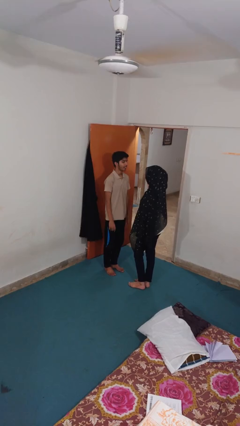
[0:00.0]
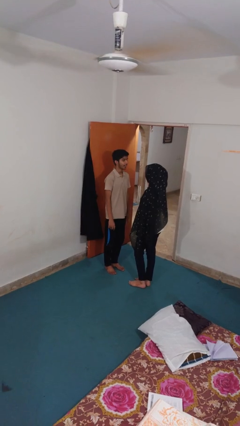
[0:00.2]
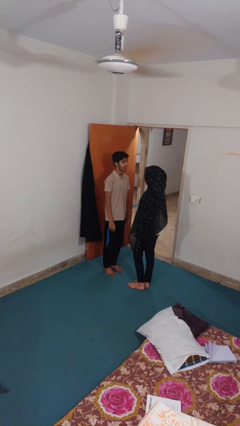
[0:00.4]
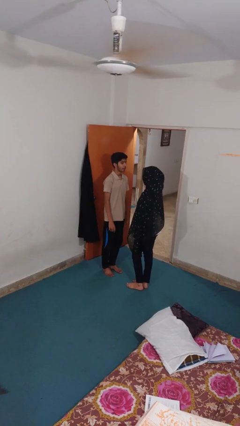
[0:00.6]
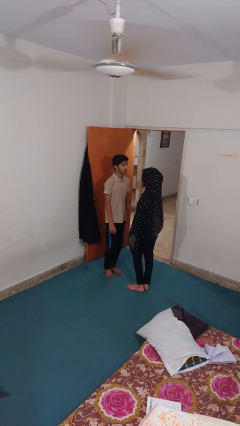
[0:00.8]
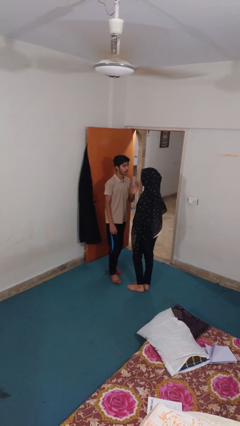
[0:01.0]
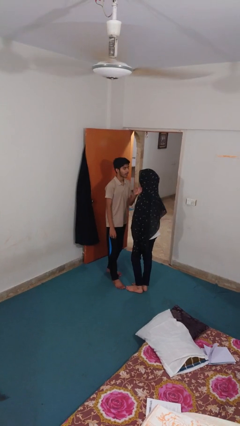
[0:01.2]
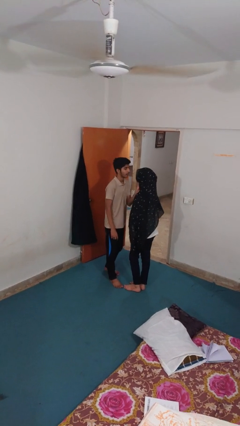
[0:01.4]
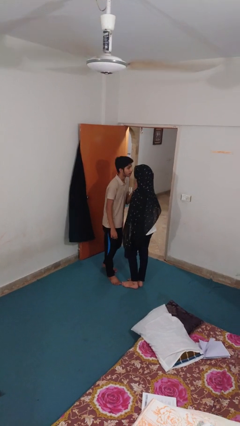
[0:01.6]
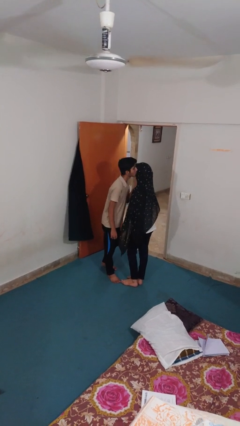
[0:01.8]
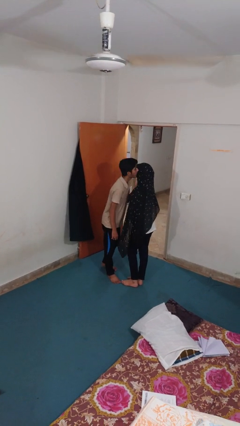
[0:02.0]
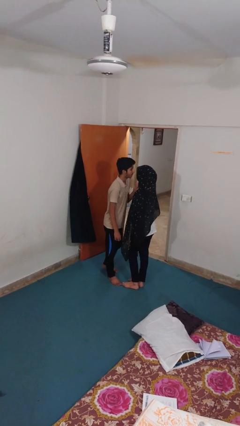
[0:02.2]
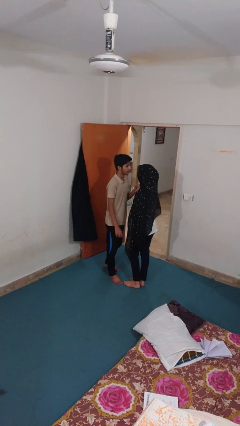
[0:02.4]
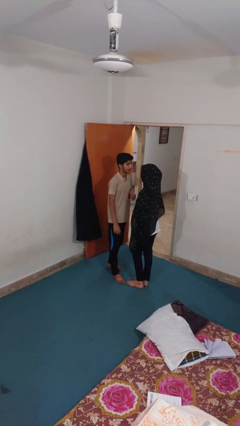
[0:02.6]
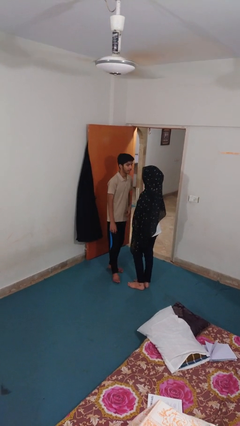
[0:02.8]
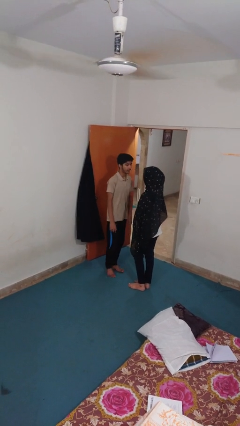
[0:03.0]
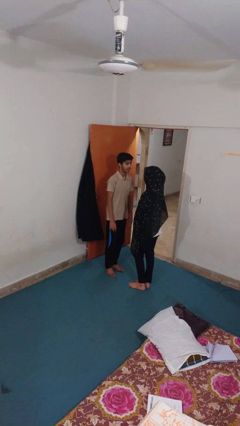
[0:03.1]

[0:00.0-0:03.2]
person kisses cheek of person

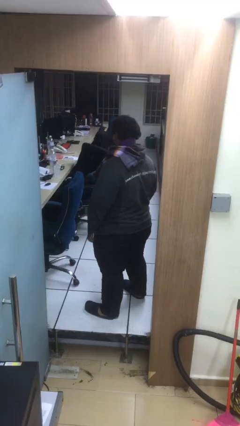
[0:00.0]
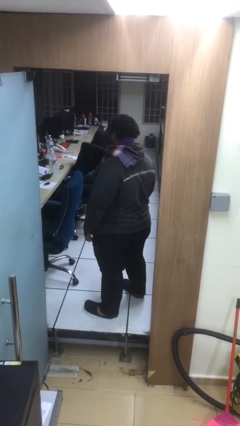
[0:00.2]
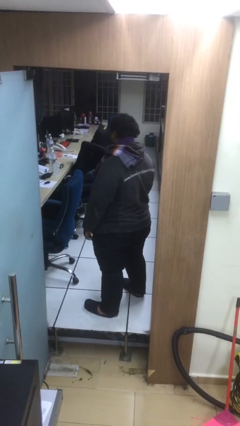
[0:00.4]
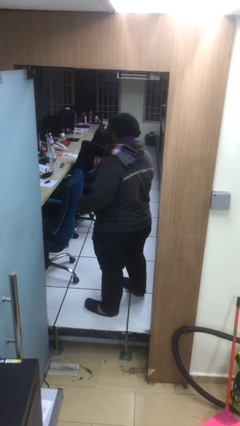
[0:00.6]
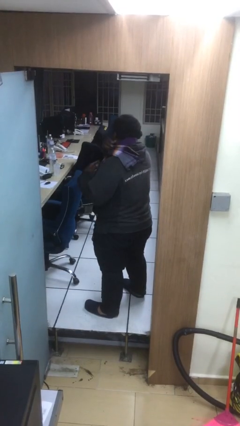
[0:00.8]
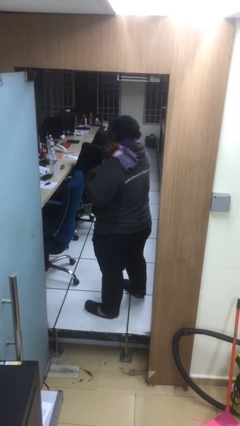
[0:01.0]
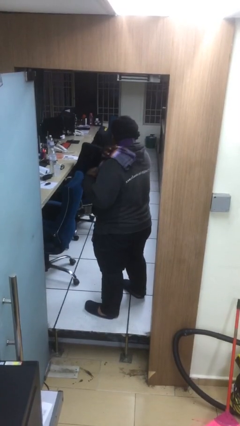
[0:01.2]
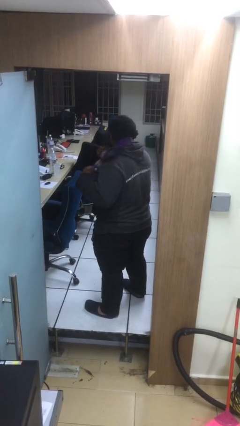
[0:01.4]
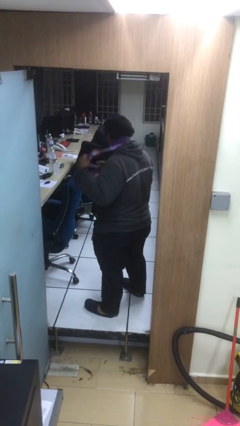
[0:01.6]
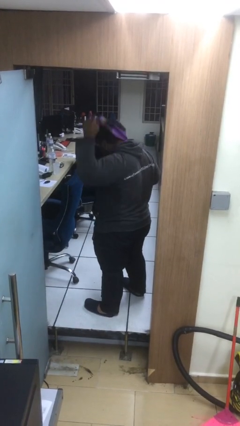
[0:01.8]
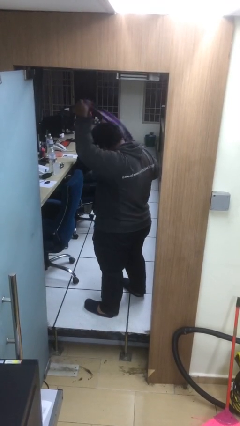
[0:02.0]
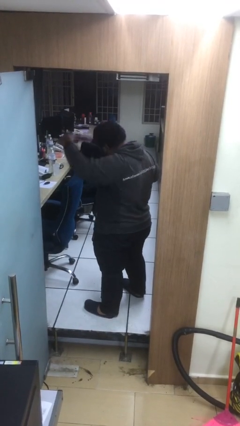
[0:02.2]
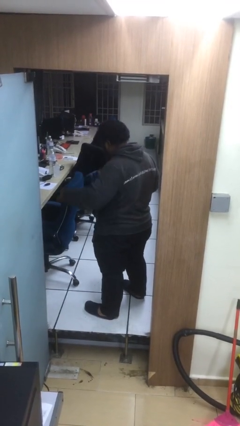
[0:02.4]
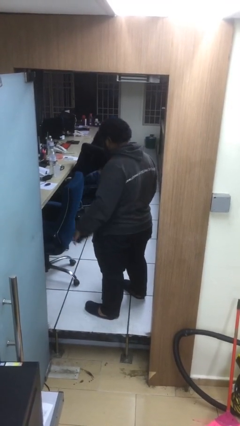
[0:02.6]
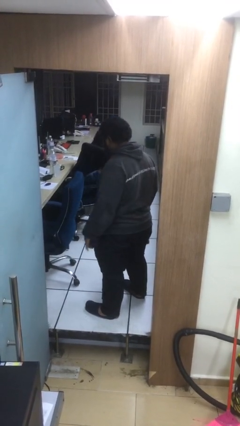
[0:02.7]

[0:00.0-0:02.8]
person takes off scarf

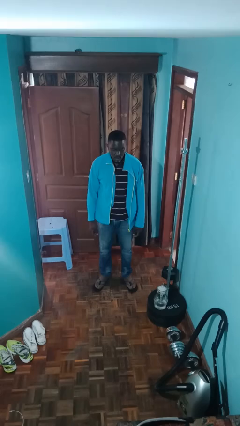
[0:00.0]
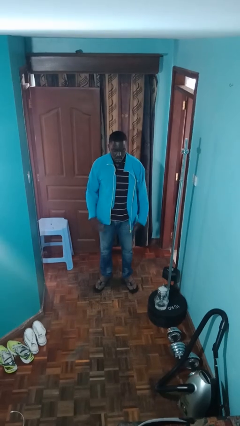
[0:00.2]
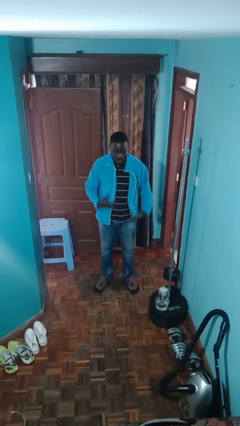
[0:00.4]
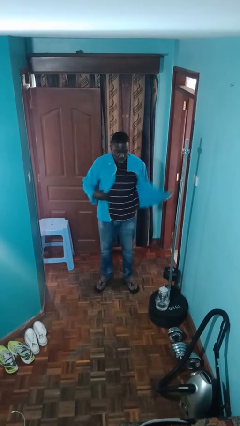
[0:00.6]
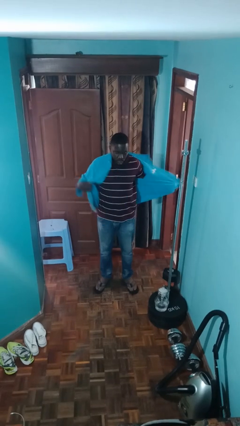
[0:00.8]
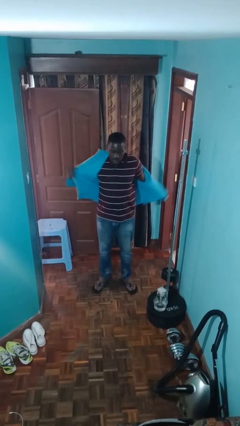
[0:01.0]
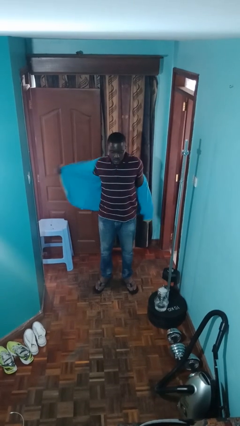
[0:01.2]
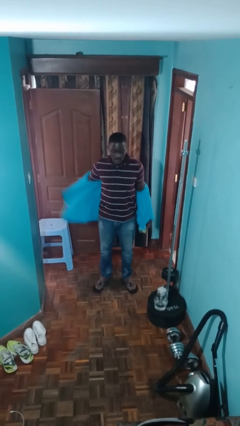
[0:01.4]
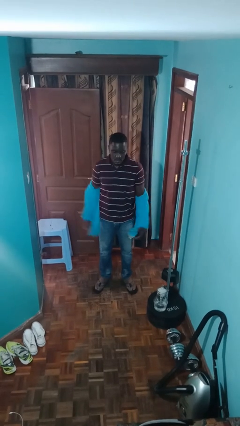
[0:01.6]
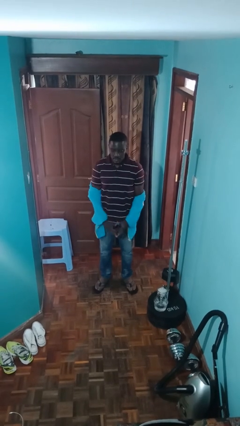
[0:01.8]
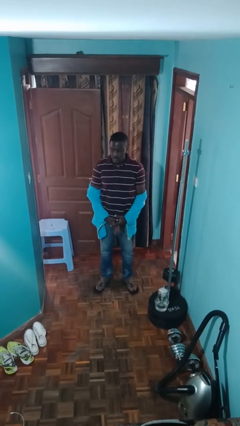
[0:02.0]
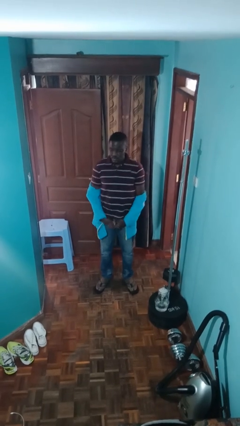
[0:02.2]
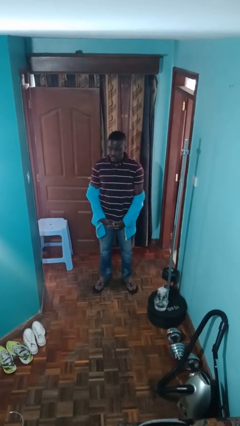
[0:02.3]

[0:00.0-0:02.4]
person takes off jacket

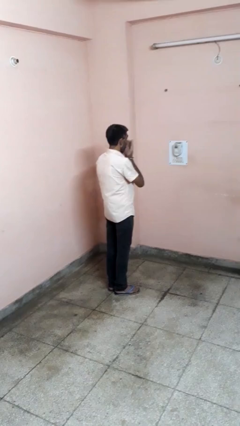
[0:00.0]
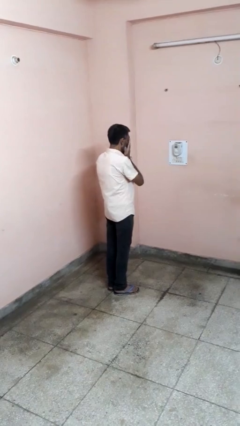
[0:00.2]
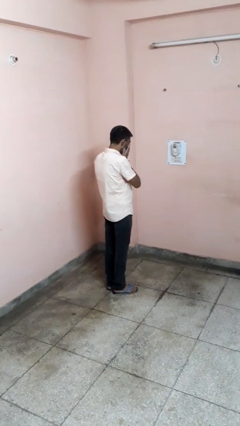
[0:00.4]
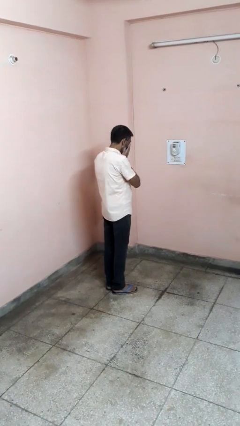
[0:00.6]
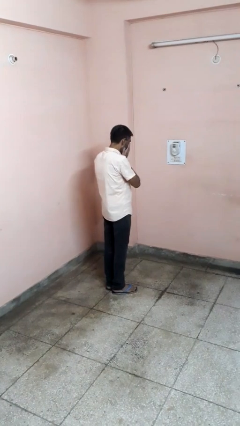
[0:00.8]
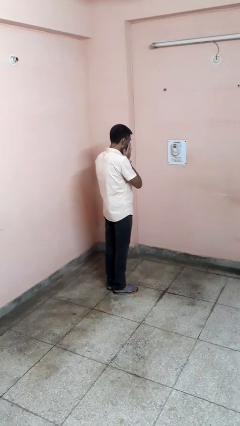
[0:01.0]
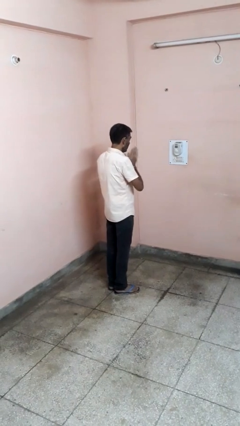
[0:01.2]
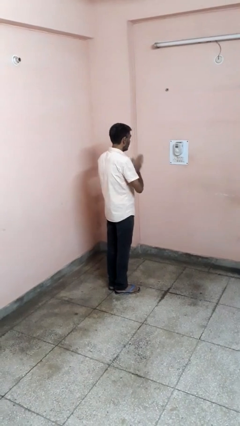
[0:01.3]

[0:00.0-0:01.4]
person sneezes into hand

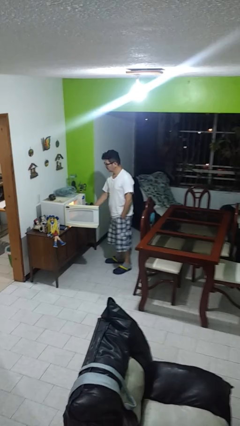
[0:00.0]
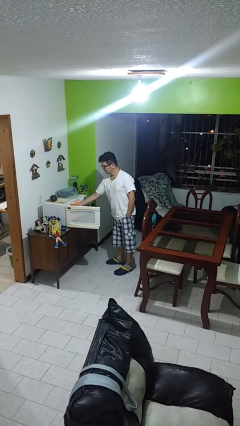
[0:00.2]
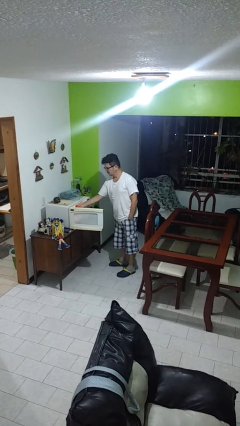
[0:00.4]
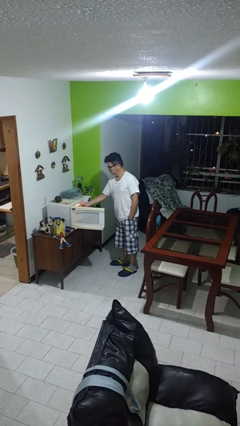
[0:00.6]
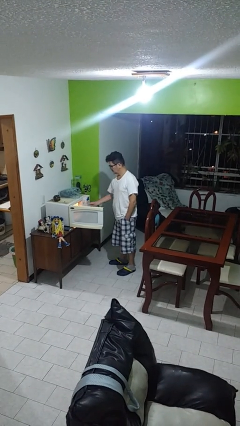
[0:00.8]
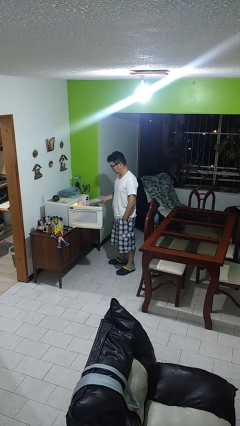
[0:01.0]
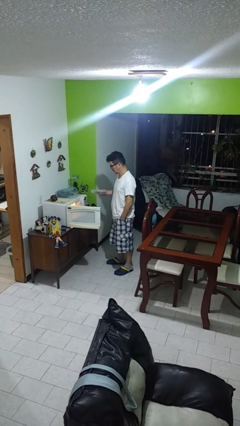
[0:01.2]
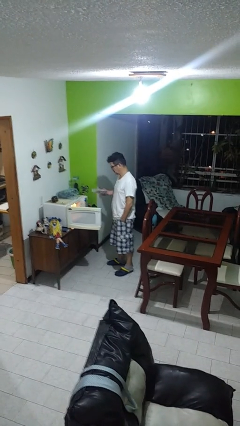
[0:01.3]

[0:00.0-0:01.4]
person takes object from microwave

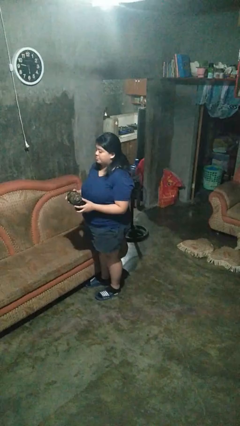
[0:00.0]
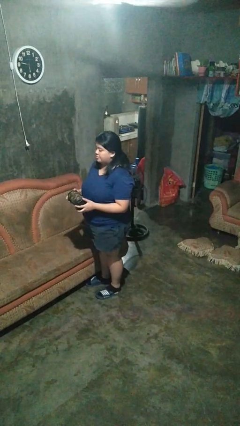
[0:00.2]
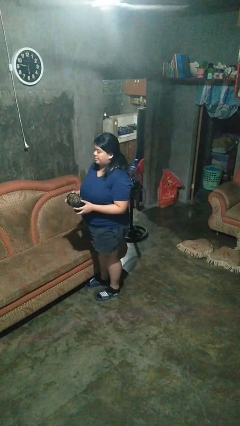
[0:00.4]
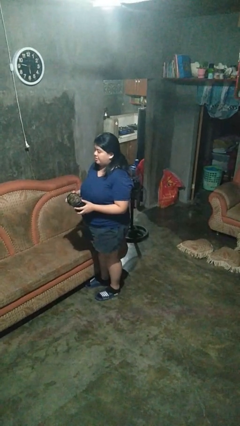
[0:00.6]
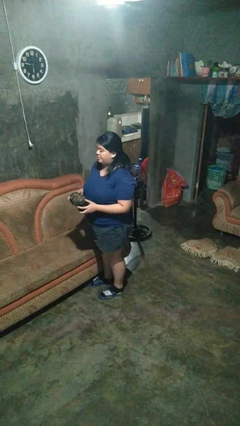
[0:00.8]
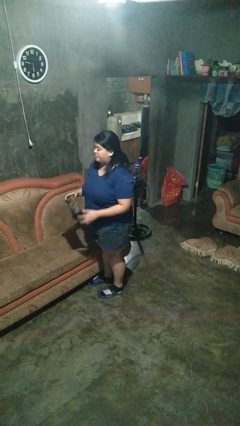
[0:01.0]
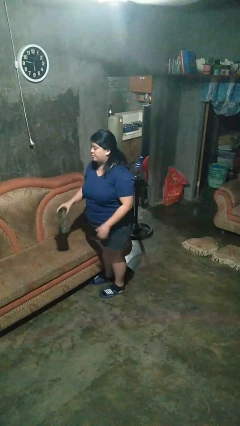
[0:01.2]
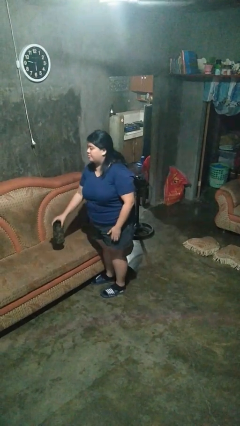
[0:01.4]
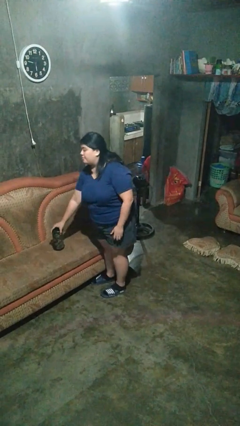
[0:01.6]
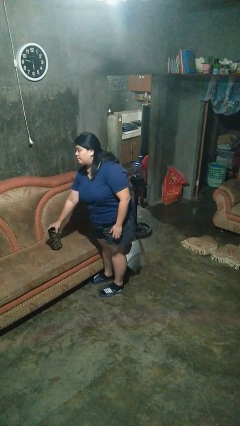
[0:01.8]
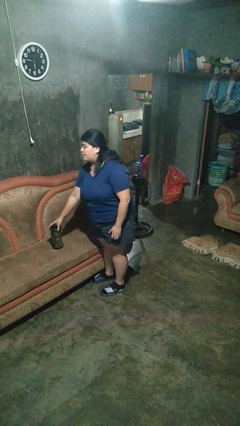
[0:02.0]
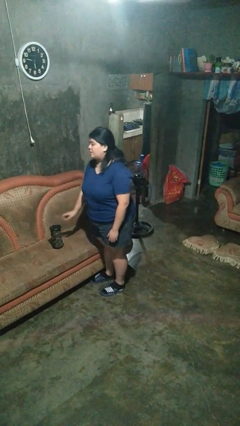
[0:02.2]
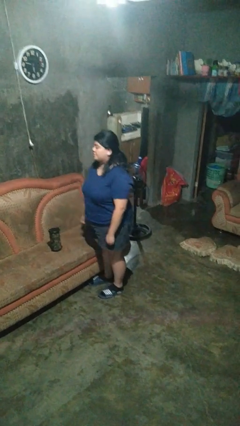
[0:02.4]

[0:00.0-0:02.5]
person puts down object on couch

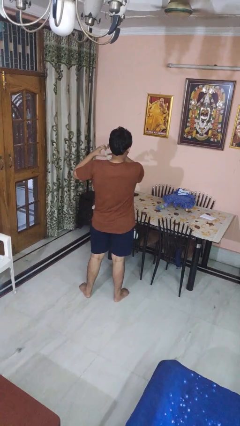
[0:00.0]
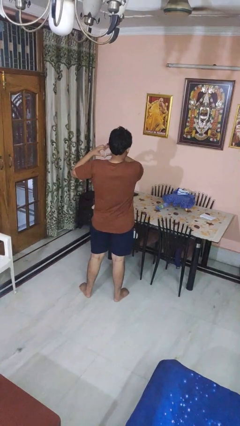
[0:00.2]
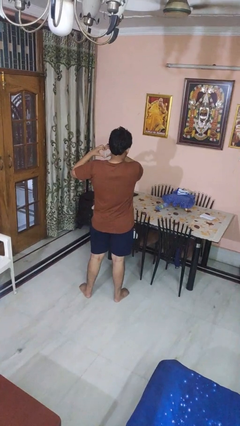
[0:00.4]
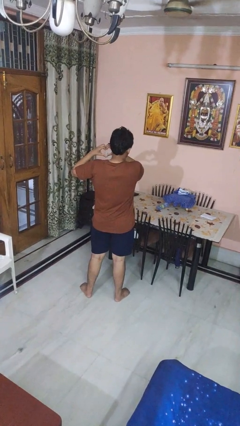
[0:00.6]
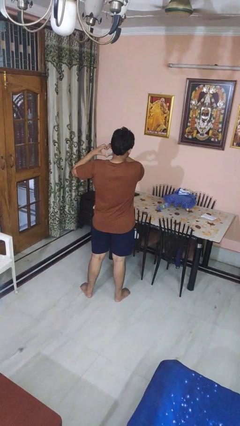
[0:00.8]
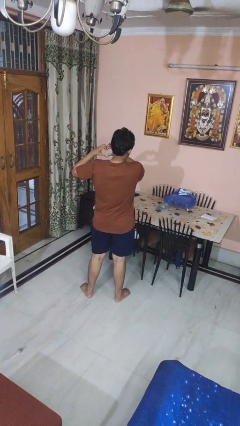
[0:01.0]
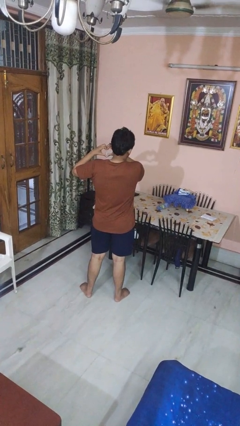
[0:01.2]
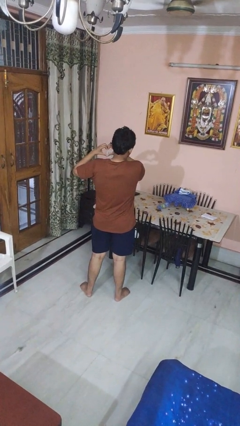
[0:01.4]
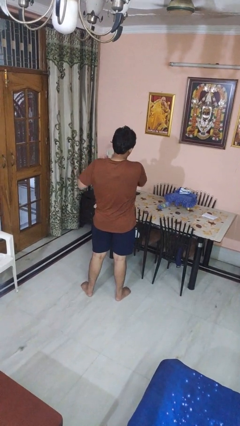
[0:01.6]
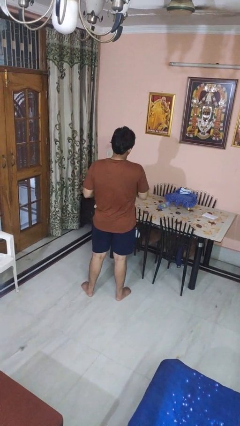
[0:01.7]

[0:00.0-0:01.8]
person gestures heart

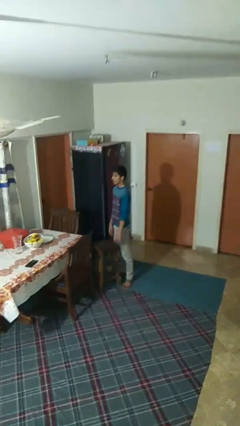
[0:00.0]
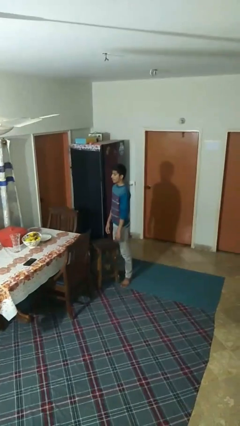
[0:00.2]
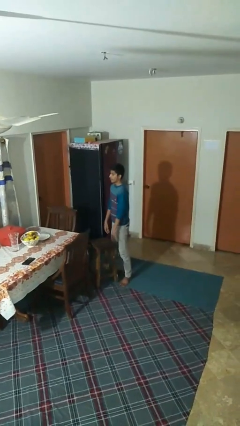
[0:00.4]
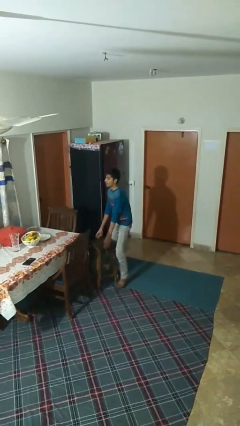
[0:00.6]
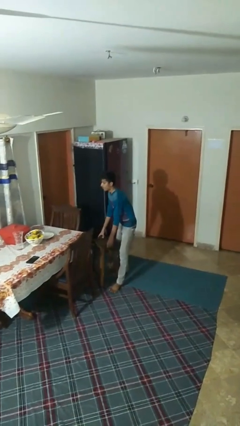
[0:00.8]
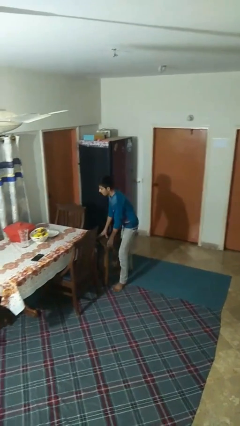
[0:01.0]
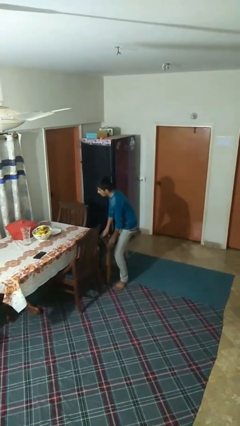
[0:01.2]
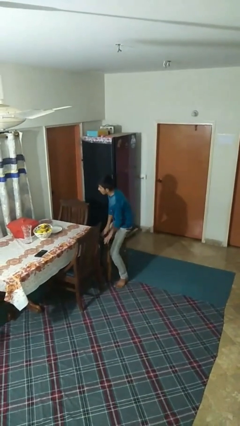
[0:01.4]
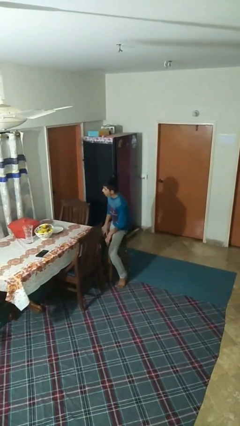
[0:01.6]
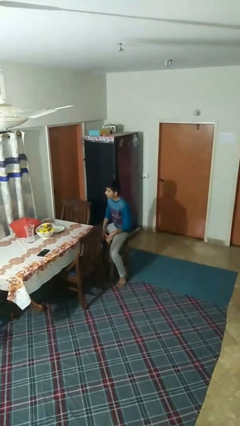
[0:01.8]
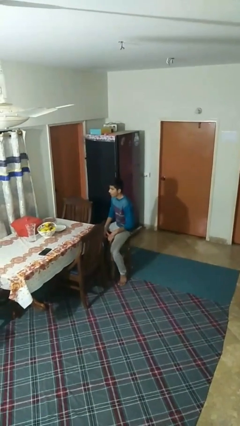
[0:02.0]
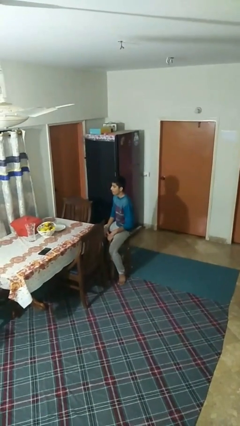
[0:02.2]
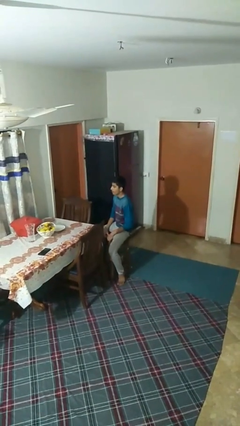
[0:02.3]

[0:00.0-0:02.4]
person sits down
